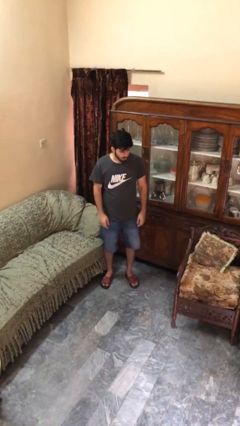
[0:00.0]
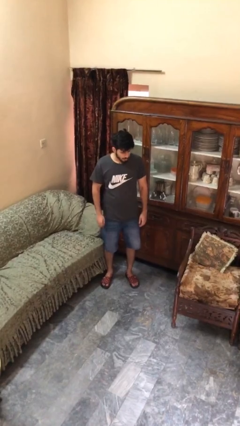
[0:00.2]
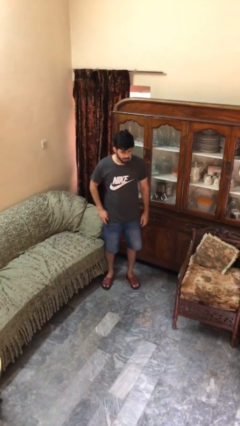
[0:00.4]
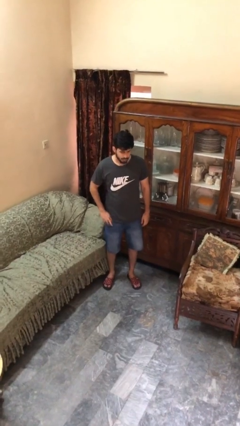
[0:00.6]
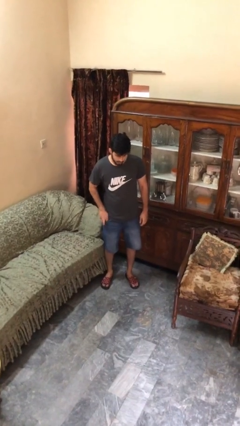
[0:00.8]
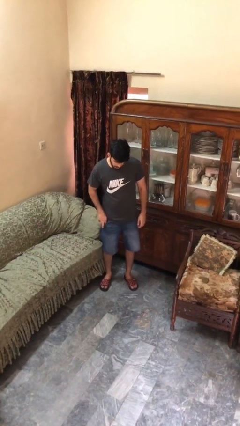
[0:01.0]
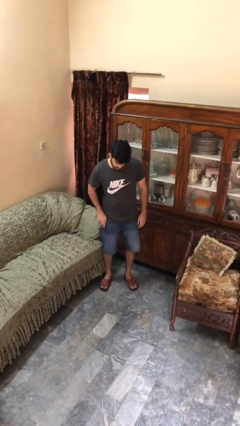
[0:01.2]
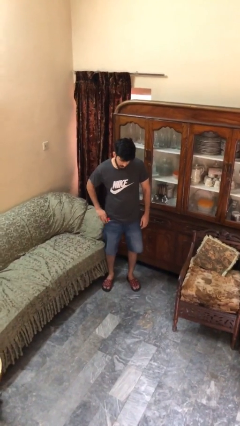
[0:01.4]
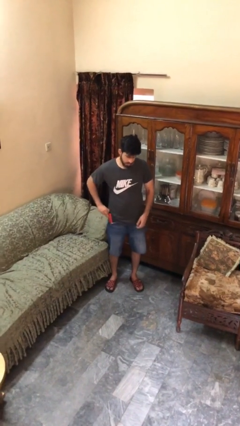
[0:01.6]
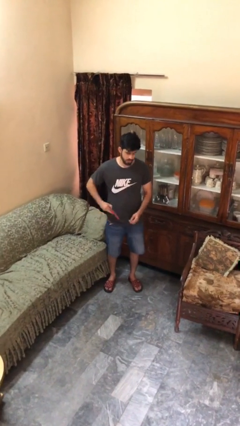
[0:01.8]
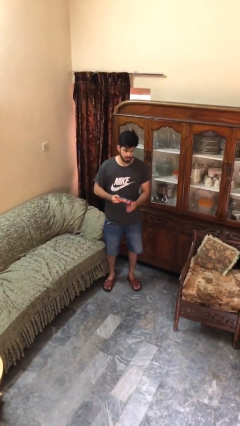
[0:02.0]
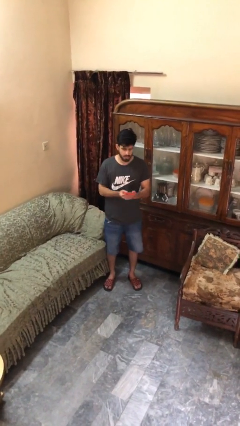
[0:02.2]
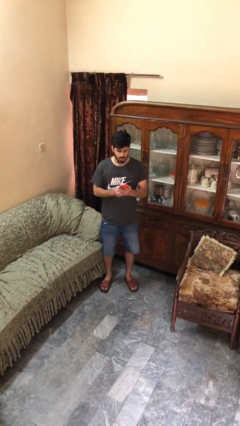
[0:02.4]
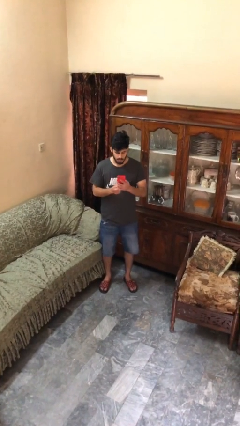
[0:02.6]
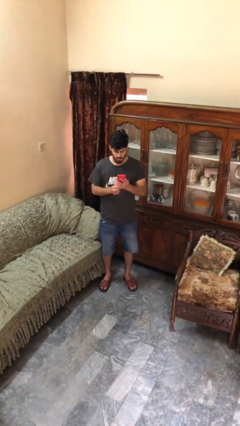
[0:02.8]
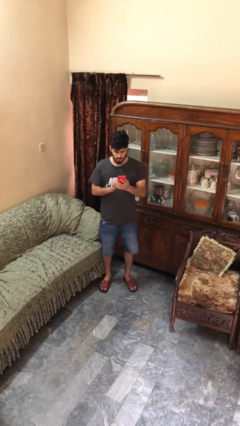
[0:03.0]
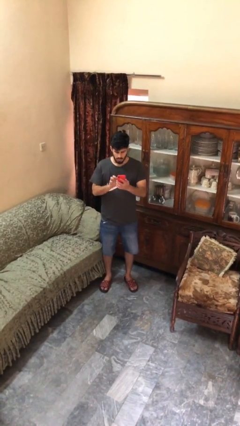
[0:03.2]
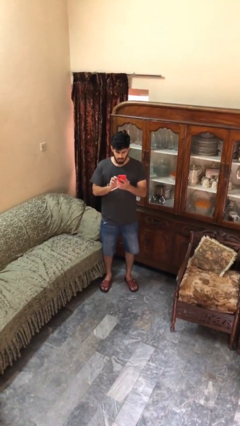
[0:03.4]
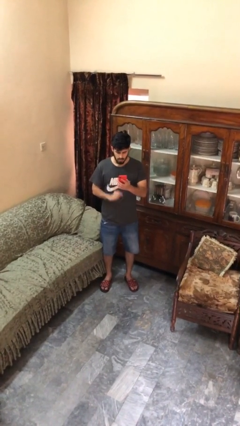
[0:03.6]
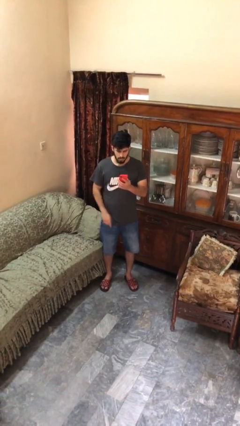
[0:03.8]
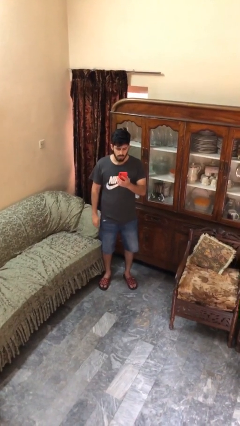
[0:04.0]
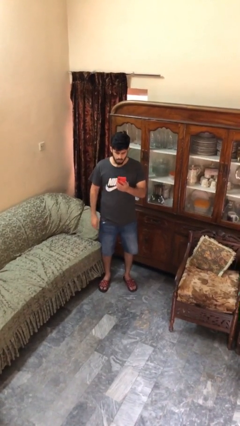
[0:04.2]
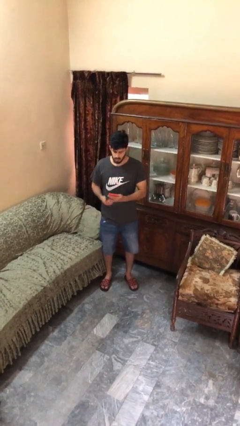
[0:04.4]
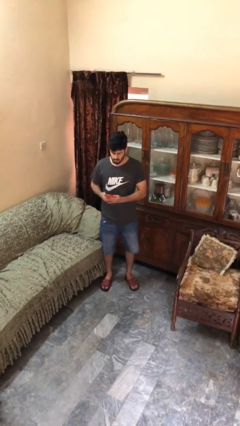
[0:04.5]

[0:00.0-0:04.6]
person takes phone from pocket

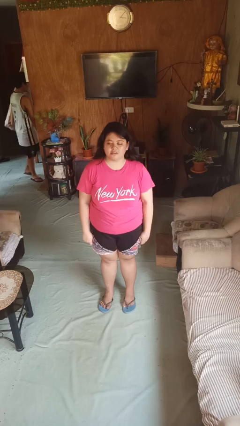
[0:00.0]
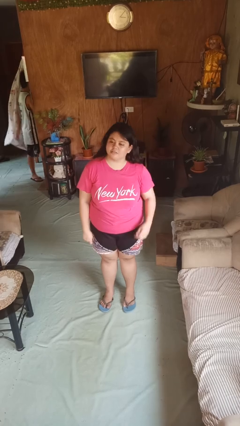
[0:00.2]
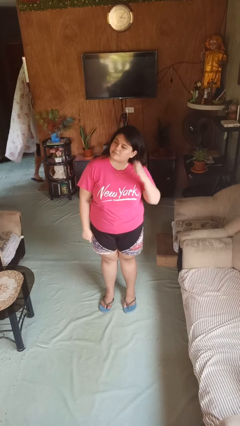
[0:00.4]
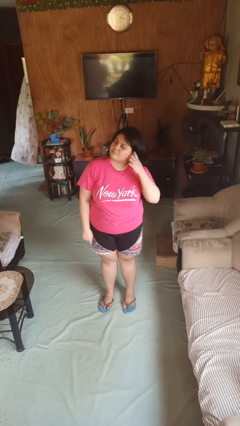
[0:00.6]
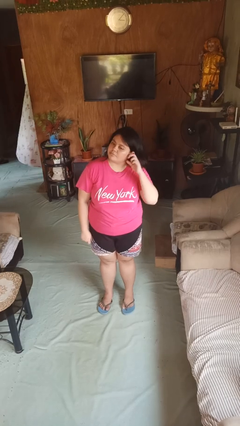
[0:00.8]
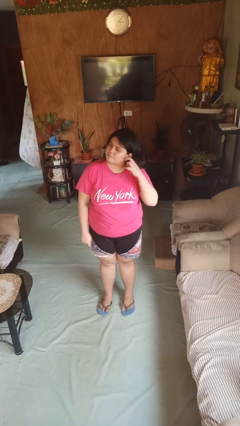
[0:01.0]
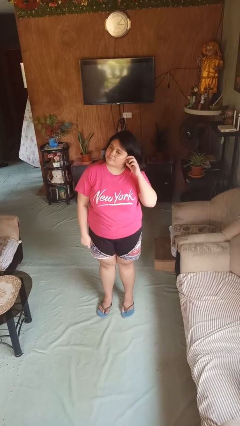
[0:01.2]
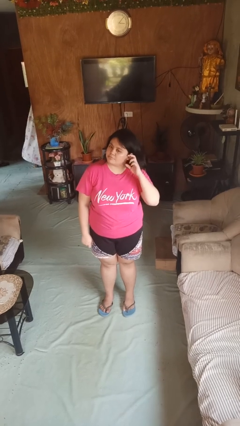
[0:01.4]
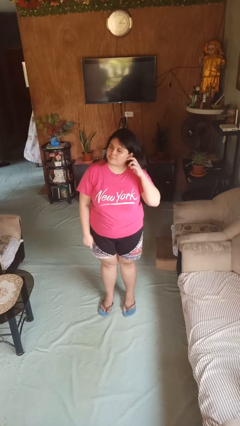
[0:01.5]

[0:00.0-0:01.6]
person touches earlobe

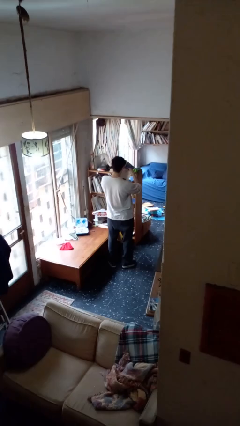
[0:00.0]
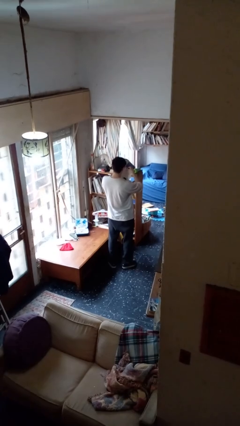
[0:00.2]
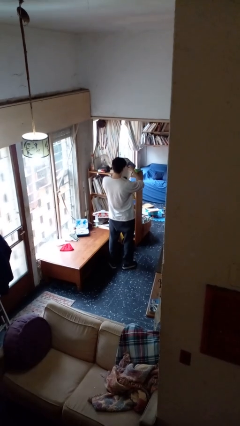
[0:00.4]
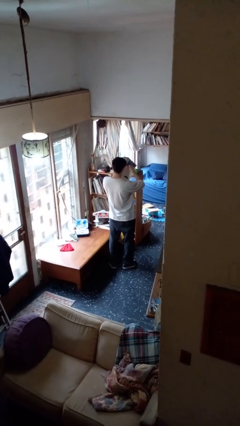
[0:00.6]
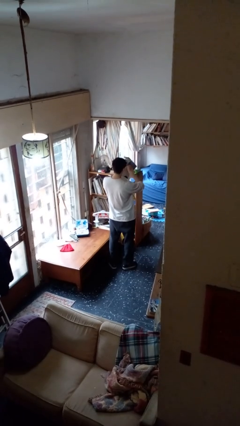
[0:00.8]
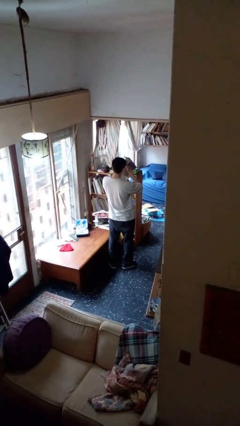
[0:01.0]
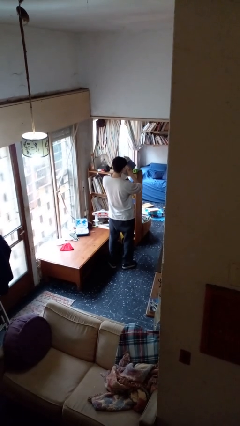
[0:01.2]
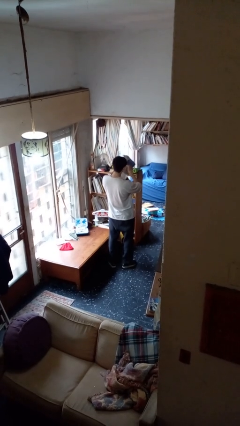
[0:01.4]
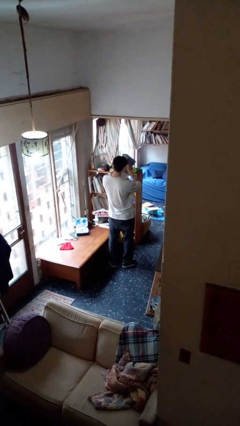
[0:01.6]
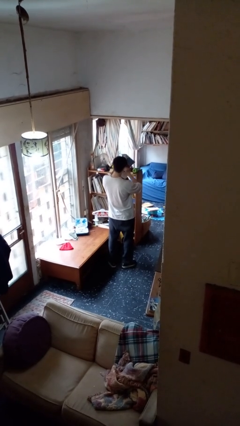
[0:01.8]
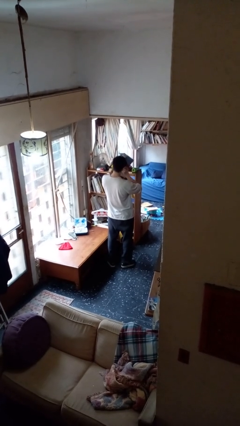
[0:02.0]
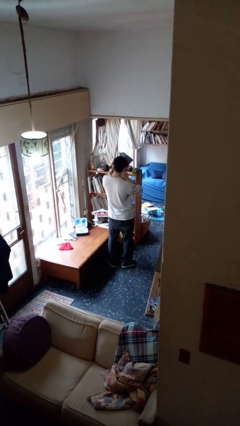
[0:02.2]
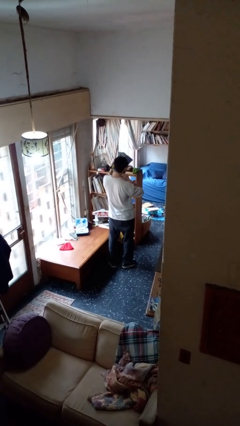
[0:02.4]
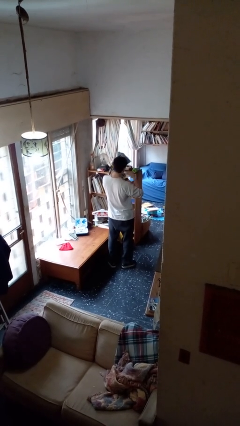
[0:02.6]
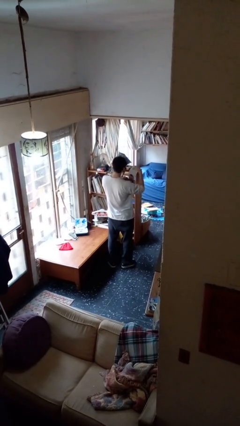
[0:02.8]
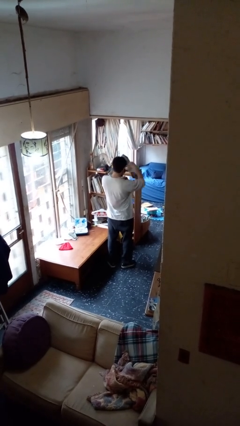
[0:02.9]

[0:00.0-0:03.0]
person tears paper

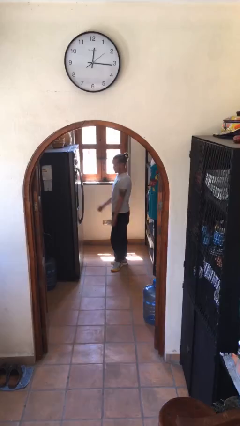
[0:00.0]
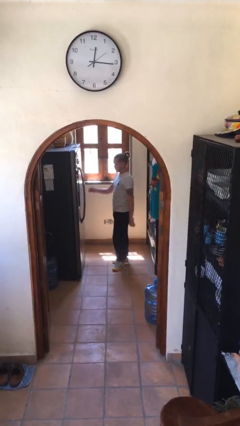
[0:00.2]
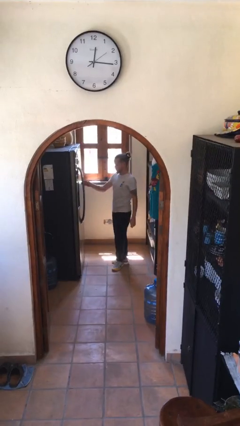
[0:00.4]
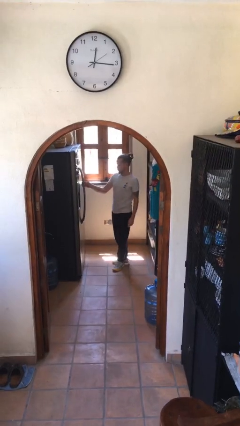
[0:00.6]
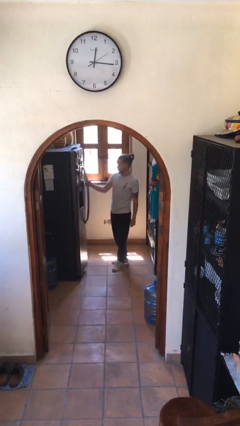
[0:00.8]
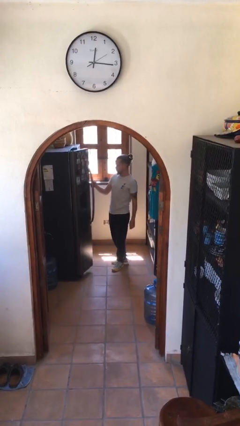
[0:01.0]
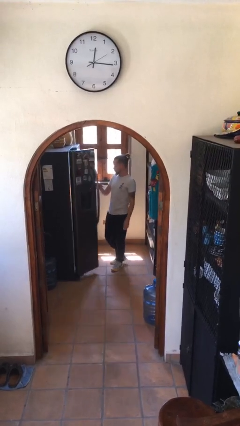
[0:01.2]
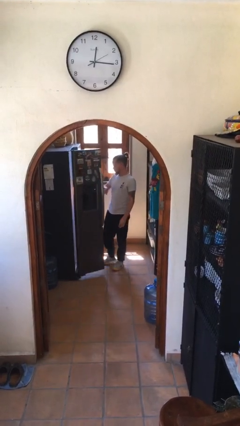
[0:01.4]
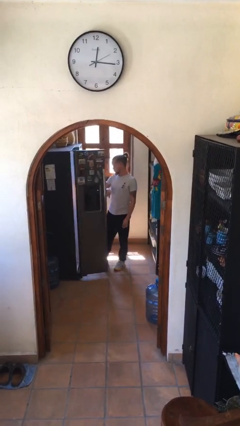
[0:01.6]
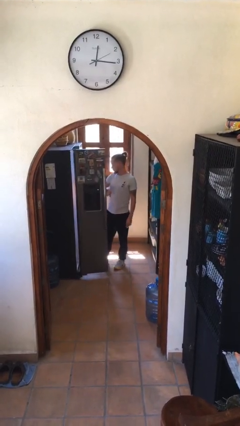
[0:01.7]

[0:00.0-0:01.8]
person opens refrigerator

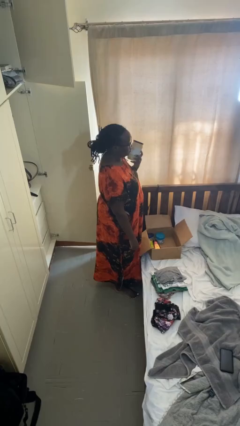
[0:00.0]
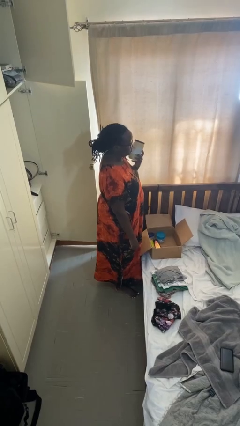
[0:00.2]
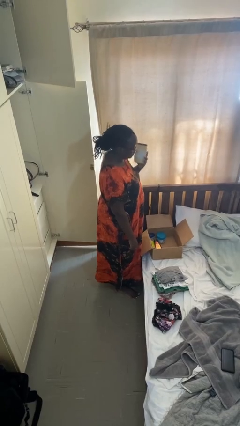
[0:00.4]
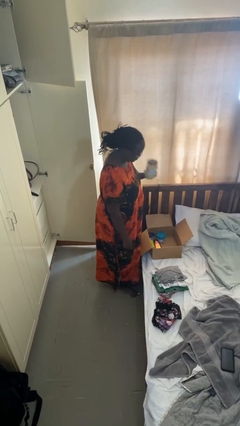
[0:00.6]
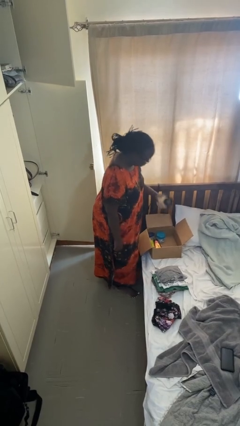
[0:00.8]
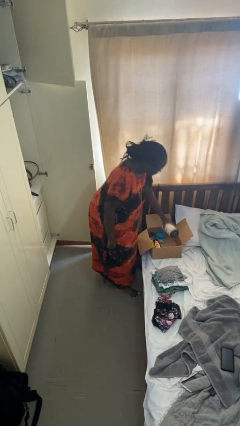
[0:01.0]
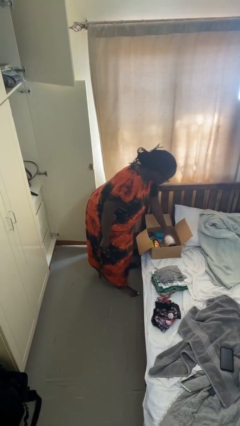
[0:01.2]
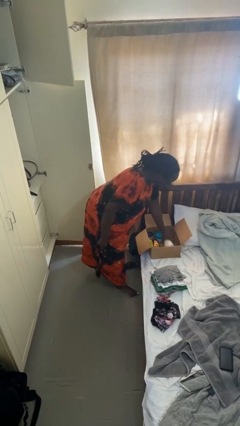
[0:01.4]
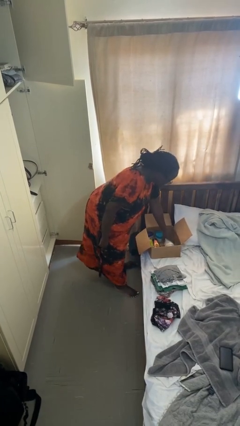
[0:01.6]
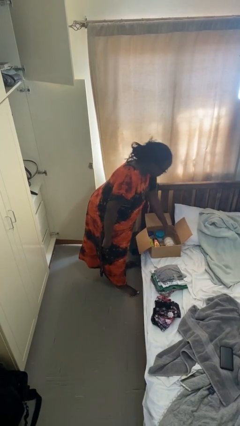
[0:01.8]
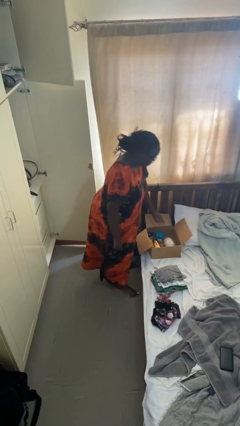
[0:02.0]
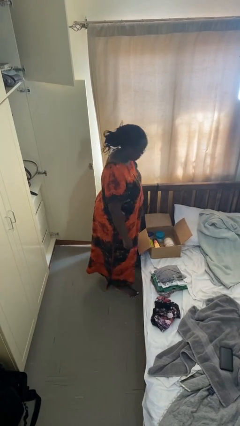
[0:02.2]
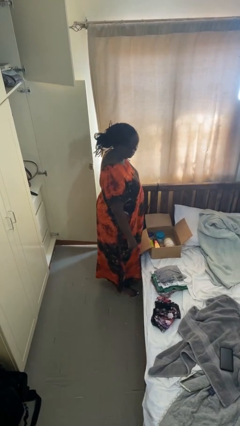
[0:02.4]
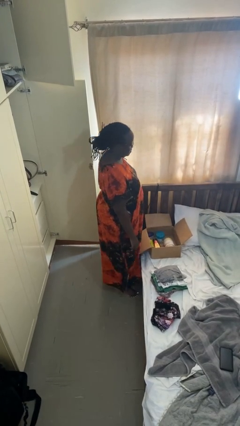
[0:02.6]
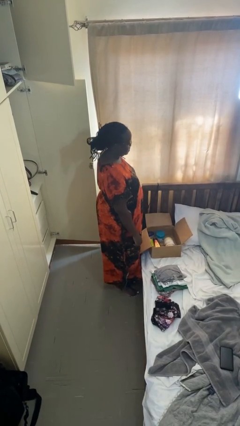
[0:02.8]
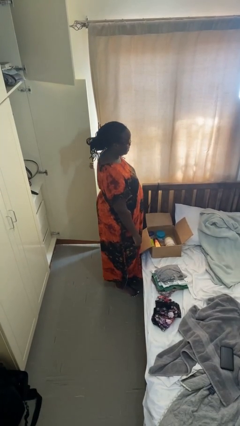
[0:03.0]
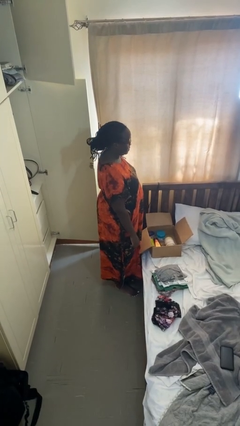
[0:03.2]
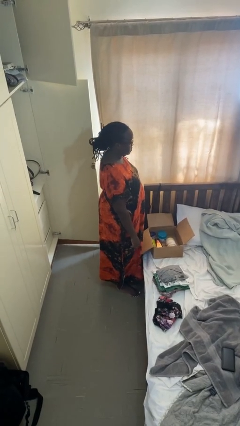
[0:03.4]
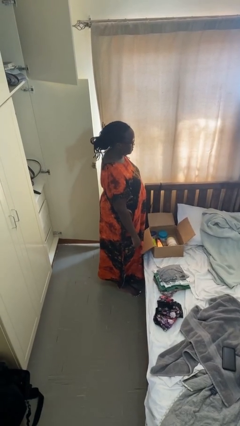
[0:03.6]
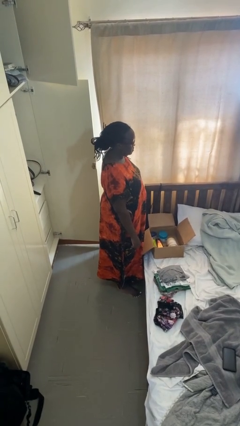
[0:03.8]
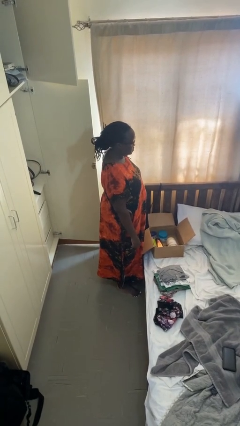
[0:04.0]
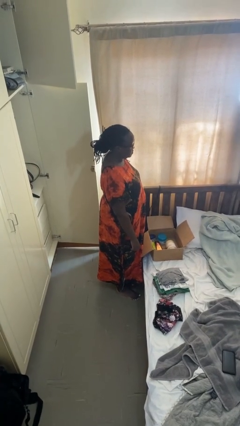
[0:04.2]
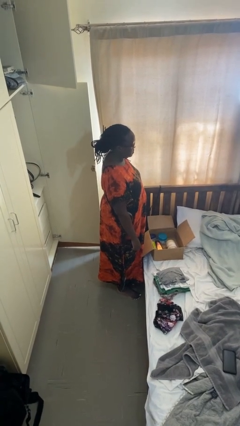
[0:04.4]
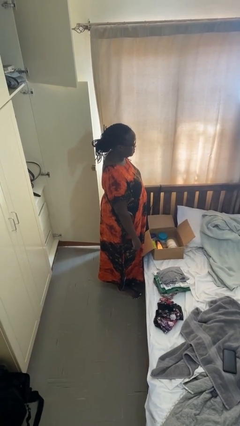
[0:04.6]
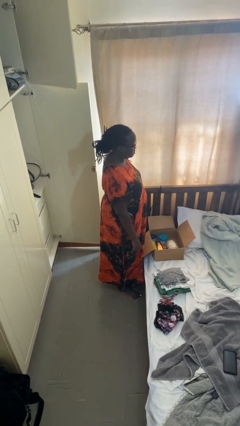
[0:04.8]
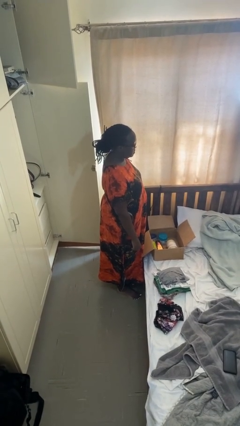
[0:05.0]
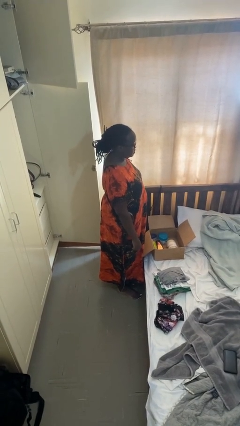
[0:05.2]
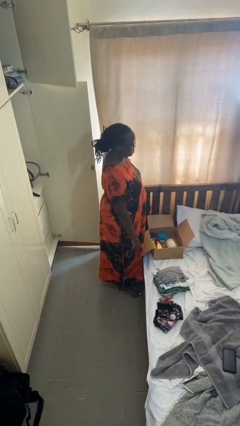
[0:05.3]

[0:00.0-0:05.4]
person puts object into box

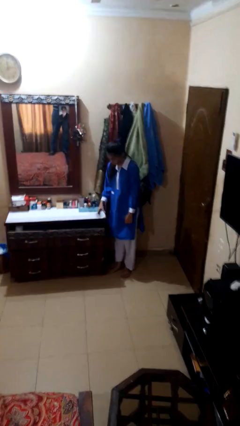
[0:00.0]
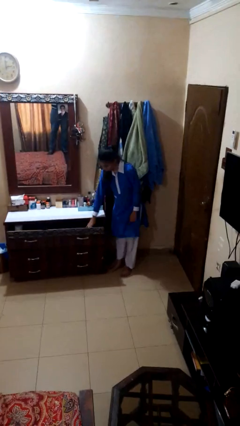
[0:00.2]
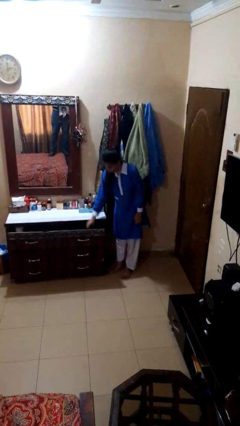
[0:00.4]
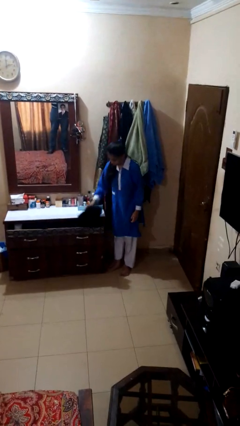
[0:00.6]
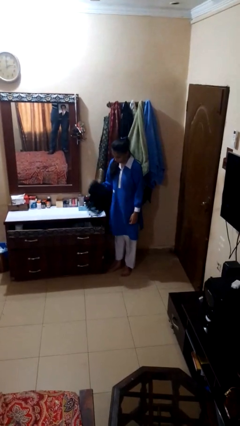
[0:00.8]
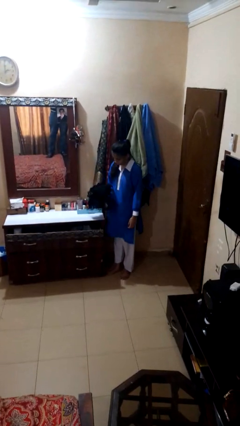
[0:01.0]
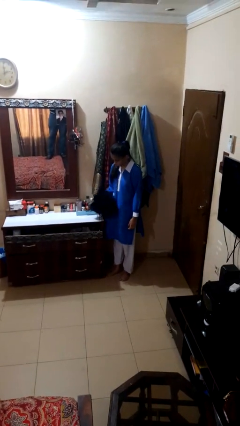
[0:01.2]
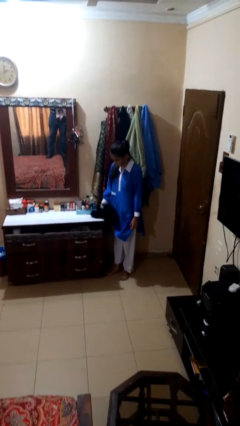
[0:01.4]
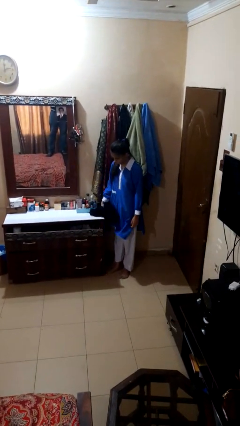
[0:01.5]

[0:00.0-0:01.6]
person takes clothes from dresser
